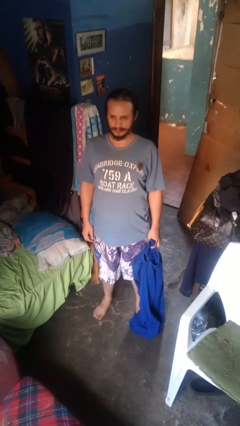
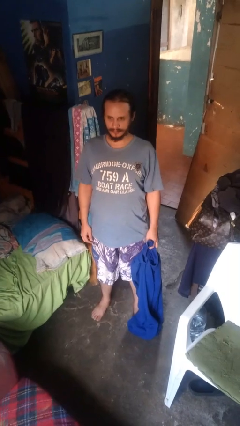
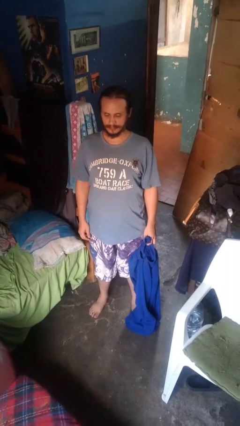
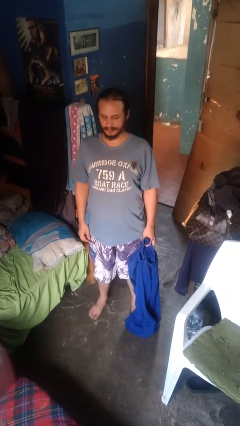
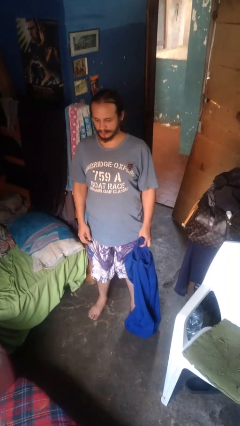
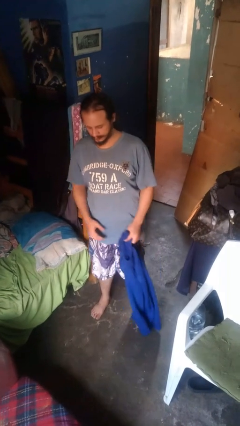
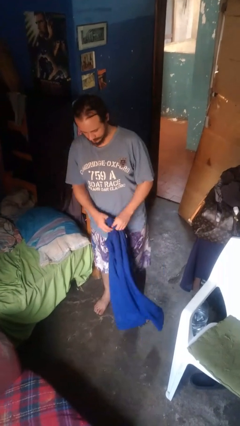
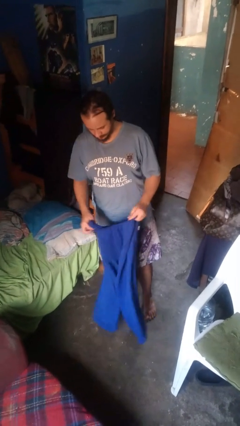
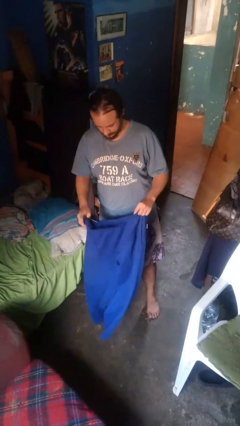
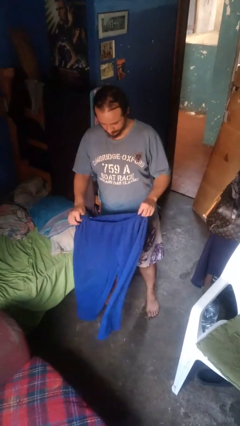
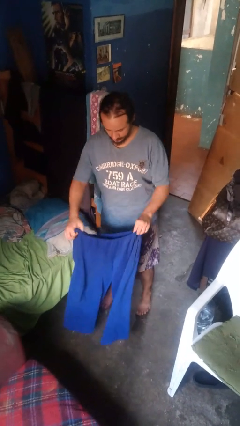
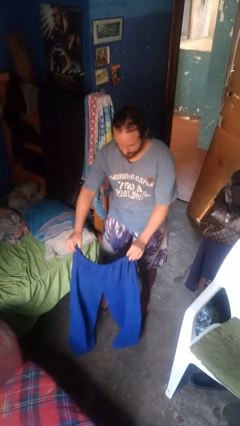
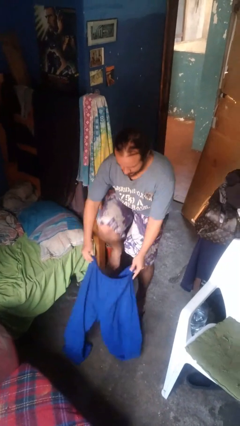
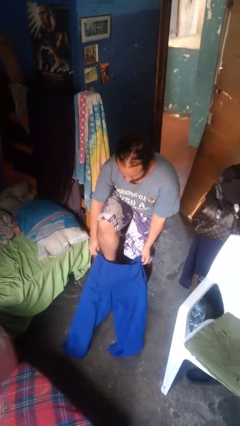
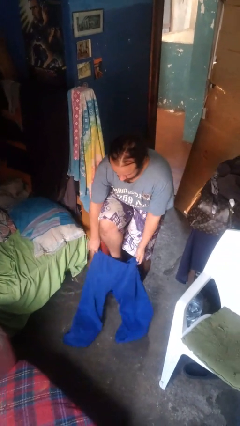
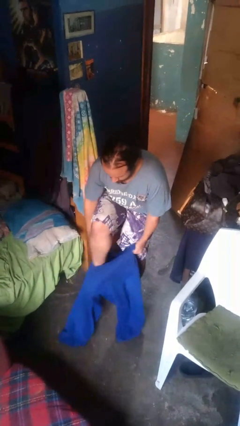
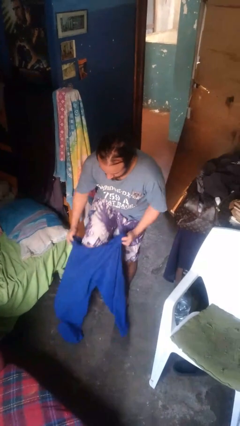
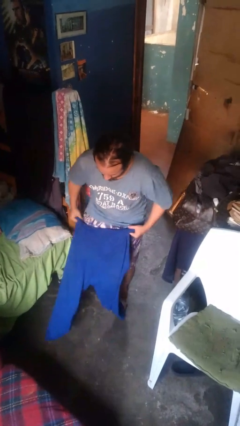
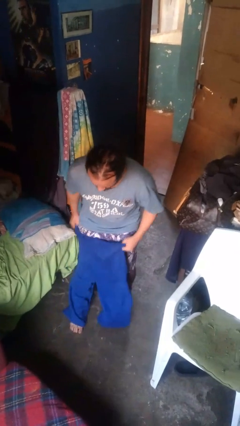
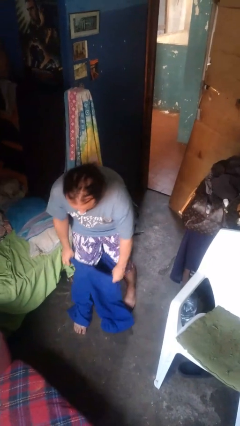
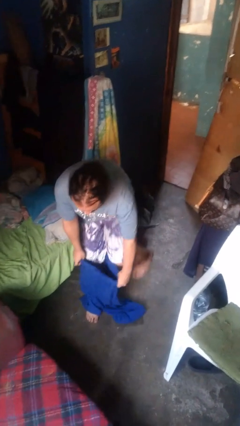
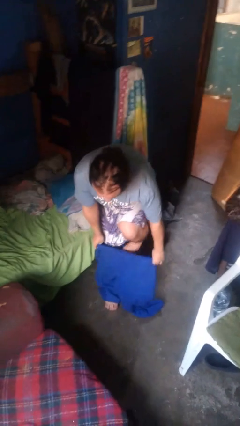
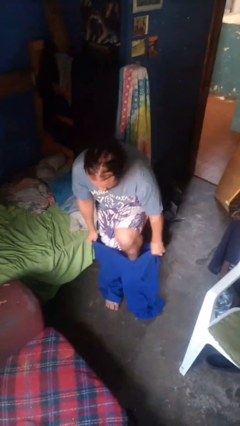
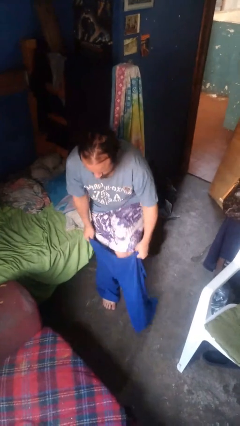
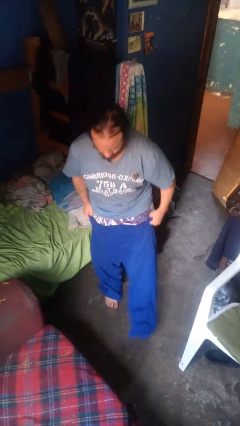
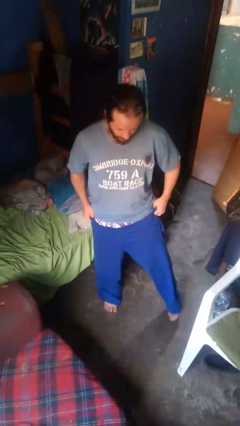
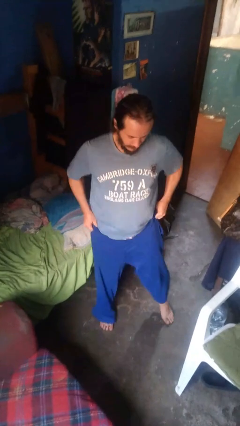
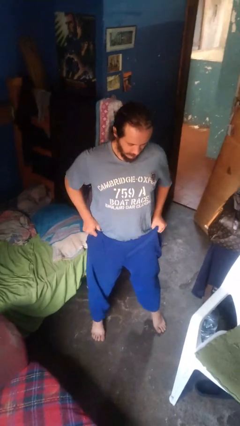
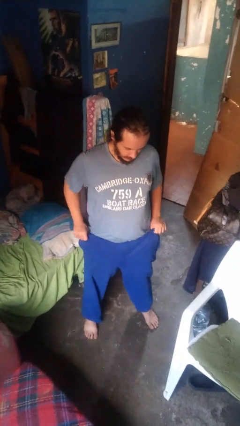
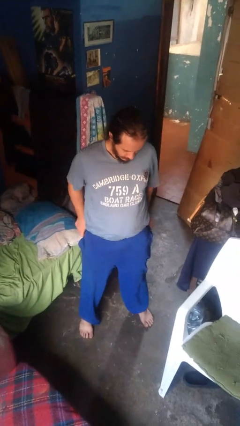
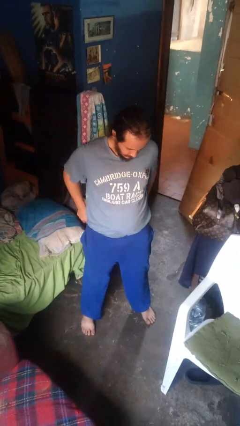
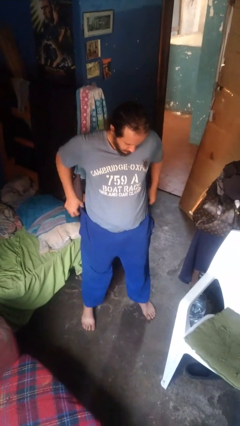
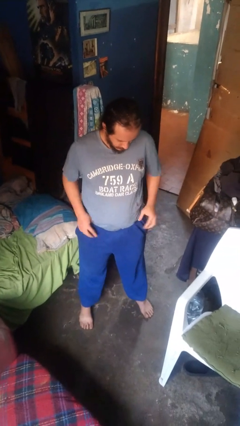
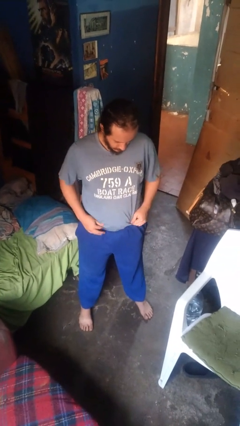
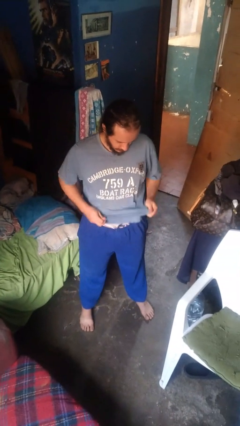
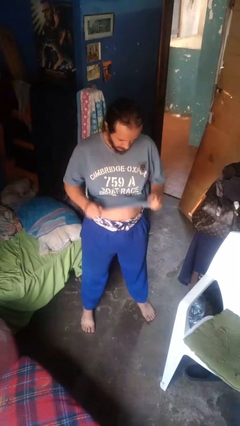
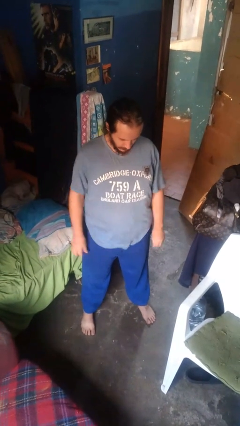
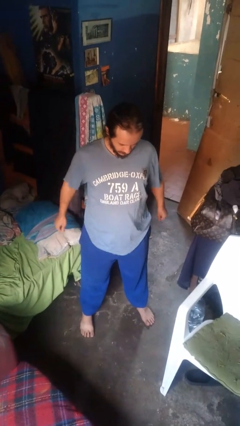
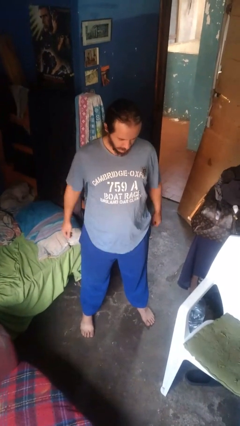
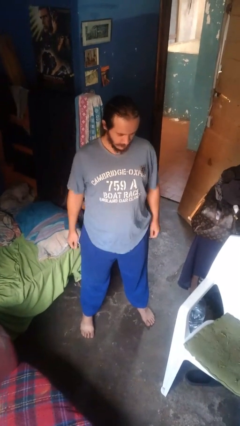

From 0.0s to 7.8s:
person puts on pants

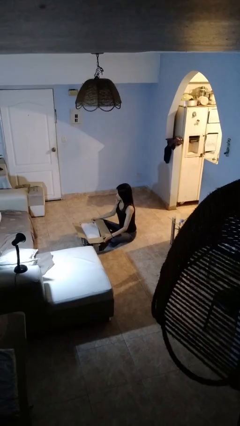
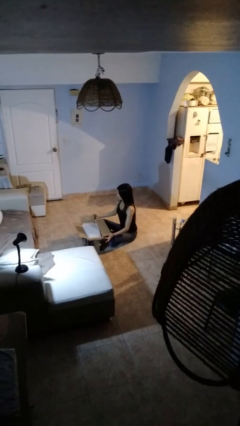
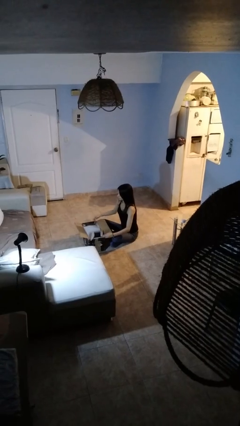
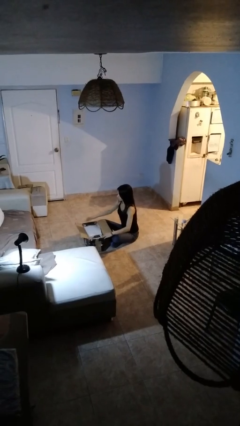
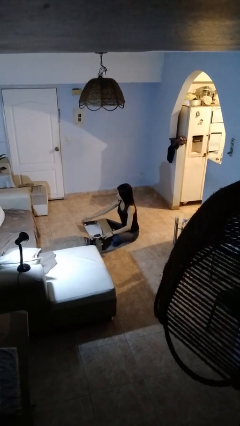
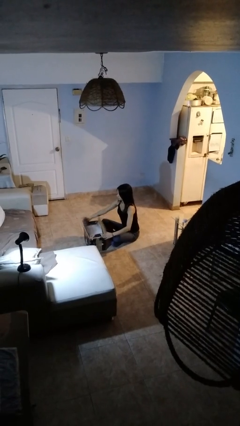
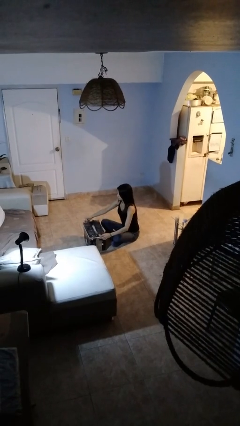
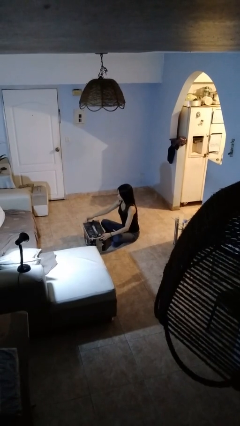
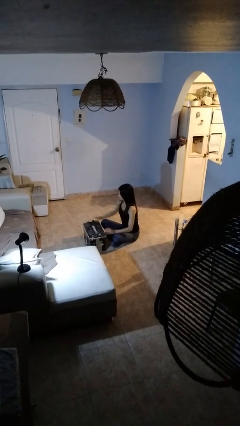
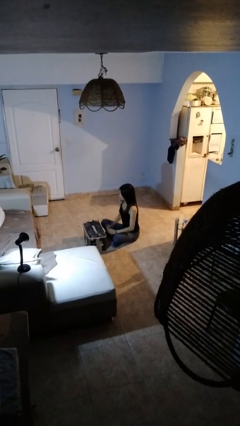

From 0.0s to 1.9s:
person closes box

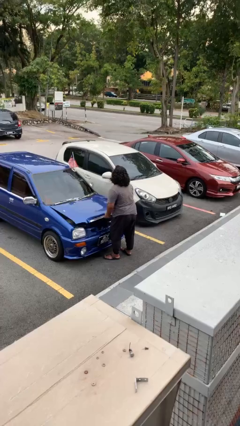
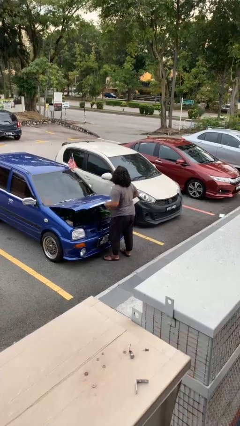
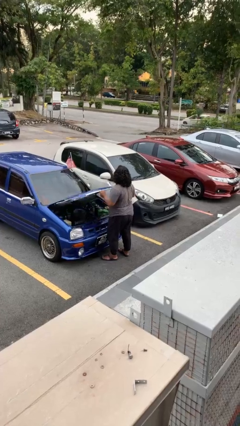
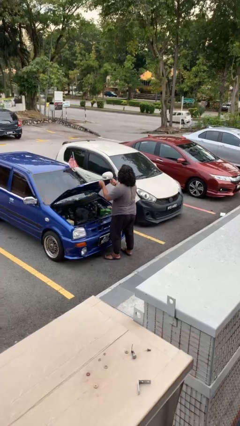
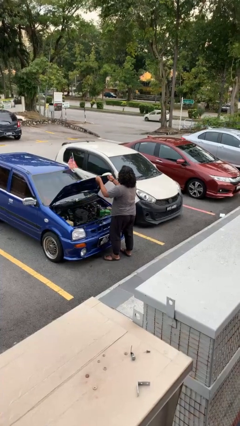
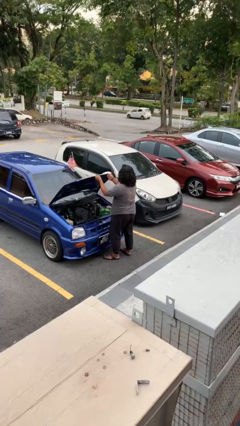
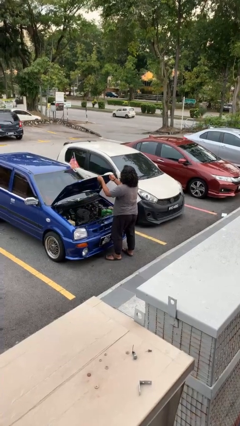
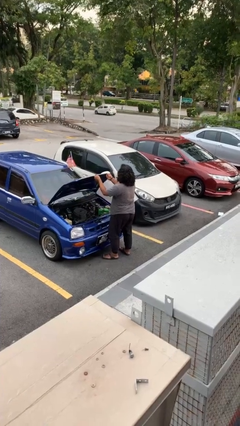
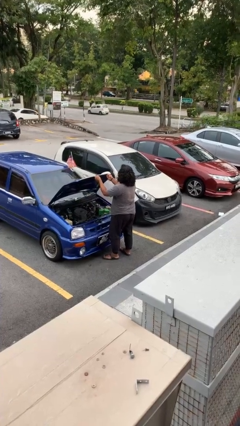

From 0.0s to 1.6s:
person opens car hood

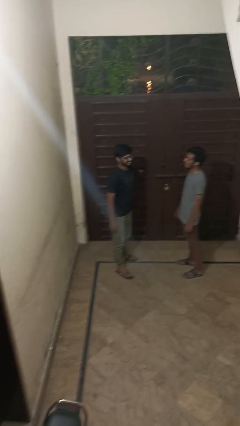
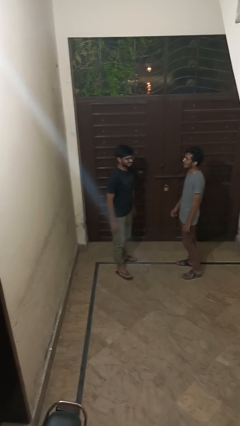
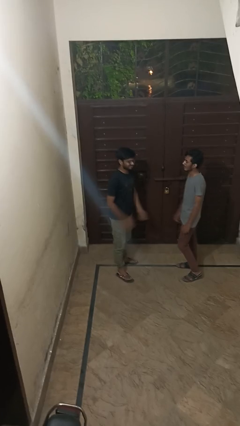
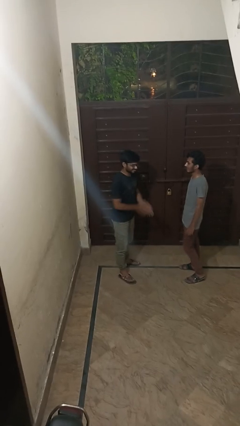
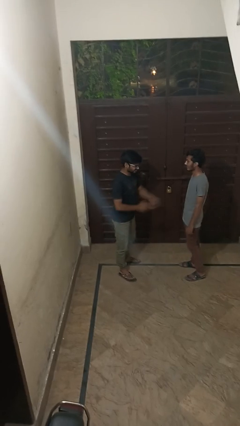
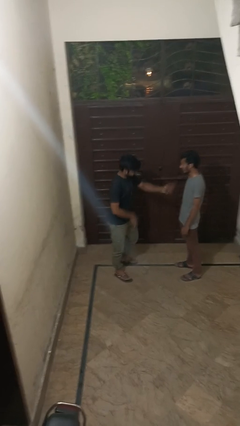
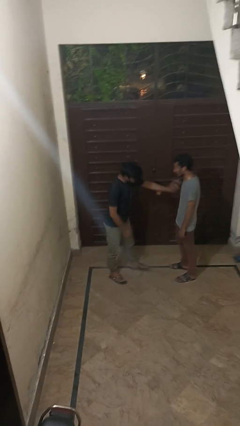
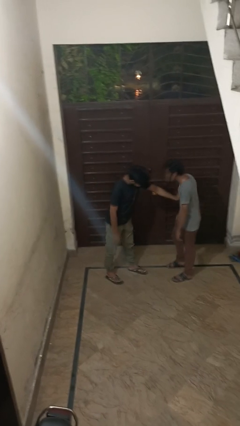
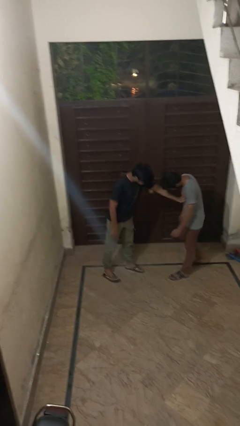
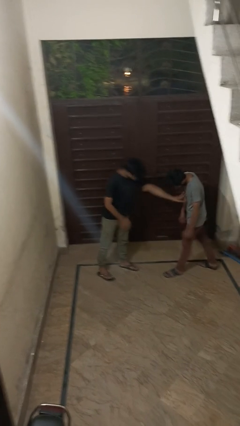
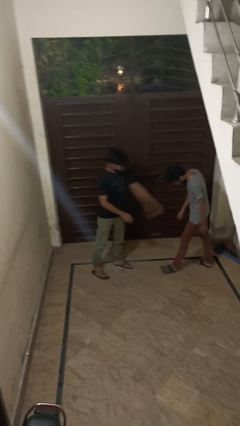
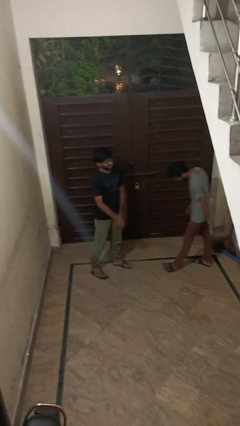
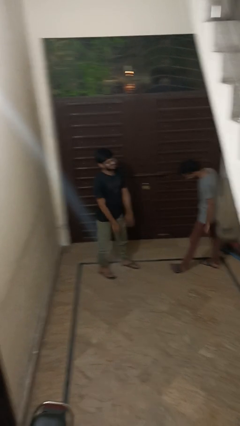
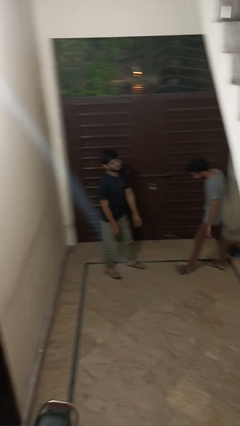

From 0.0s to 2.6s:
person shoves person

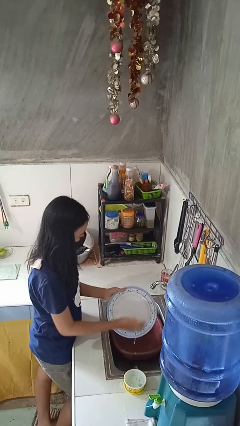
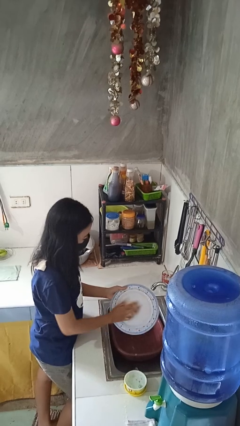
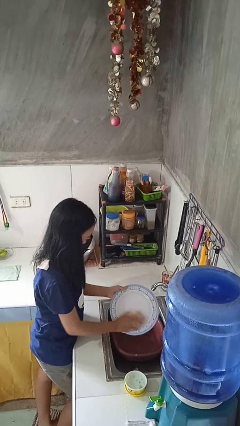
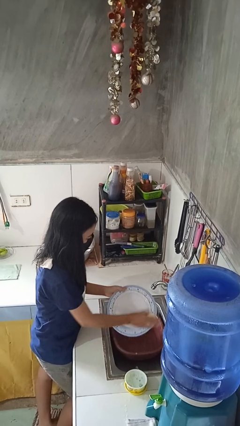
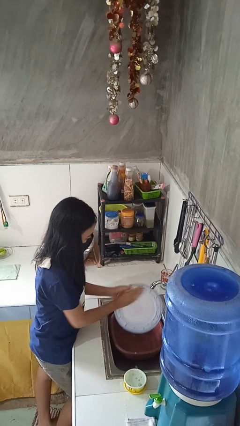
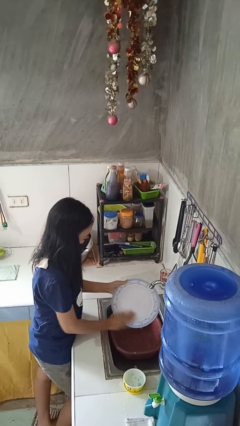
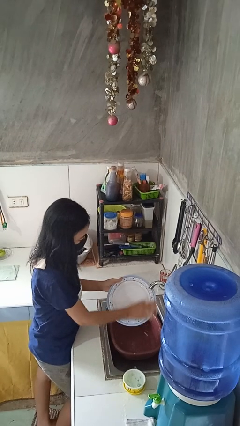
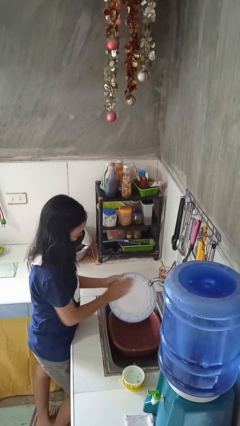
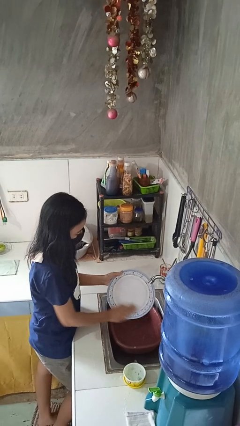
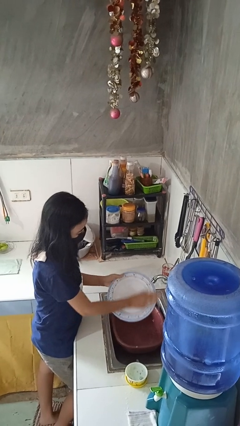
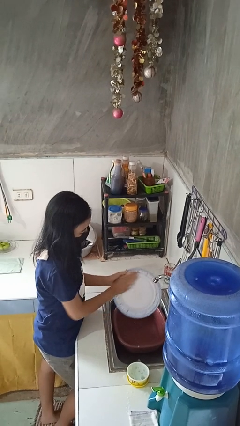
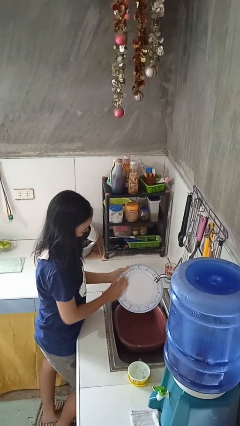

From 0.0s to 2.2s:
person washes dish

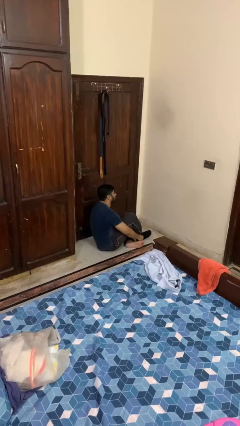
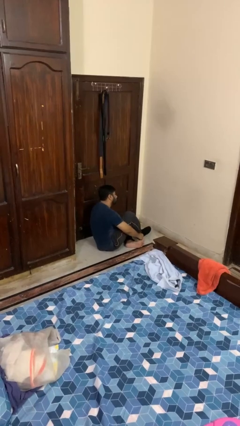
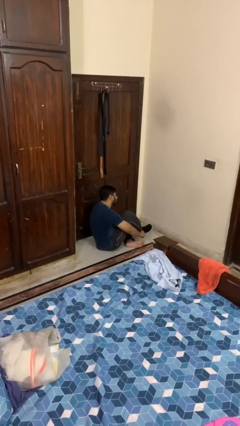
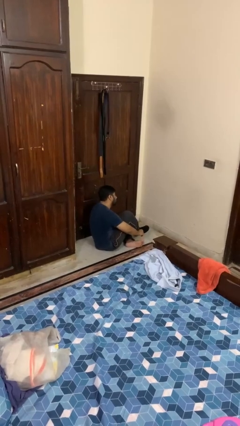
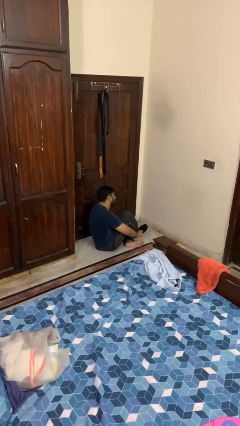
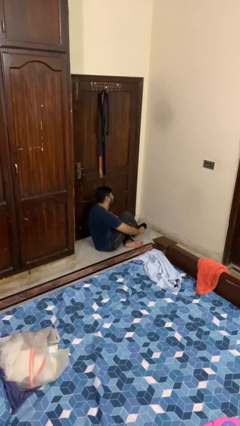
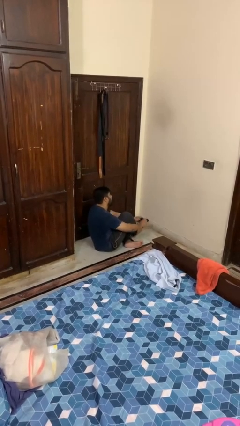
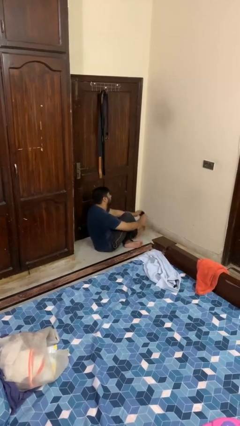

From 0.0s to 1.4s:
person takes off socks
